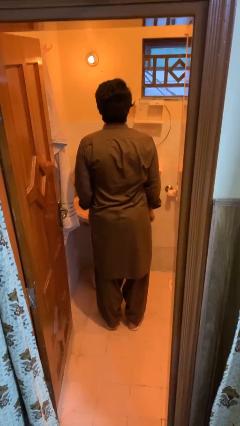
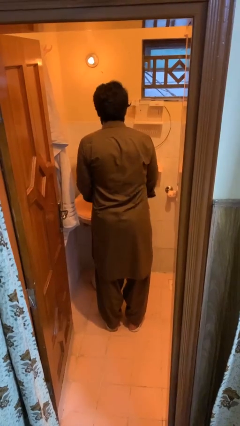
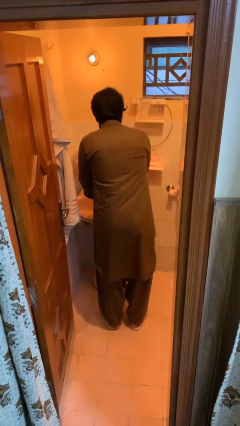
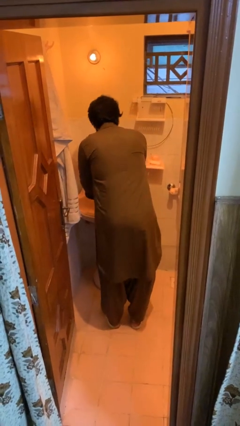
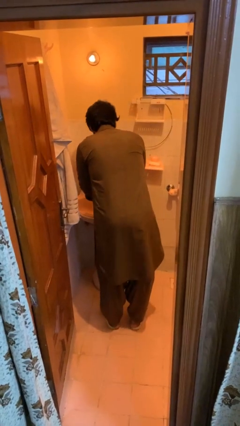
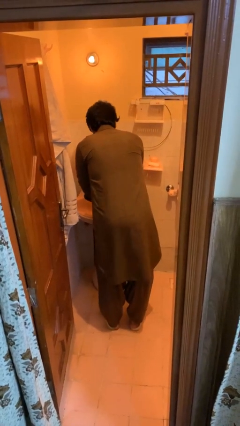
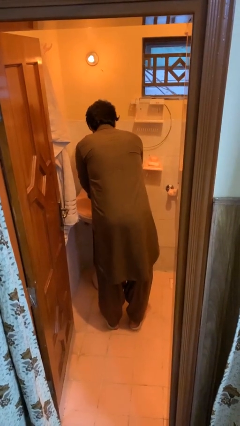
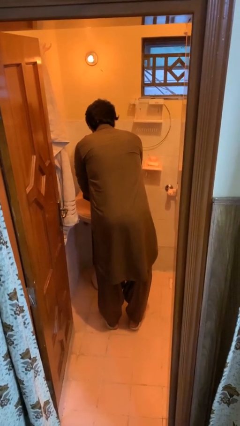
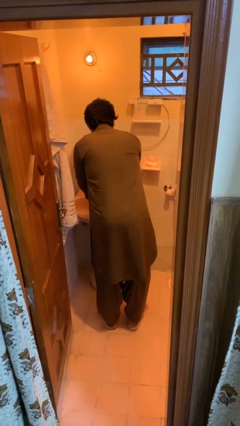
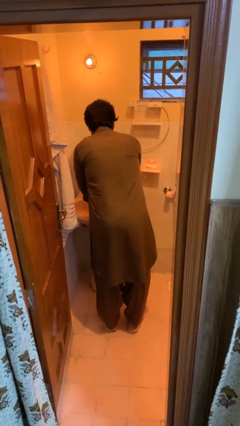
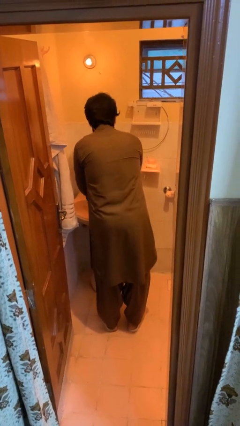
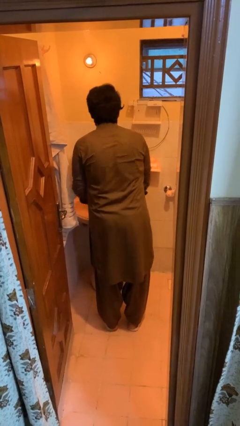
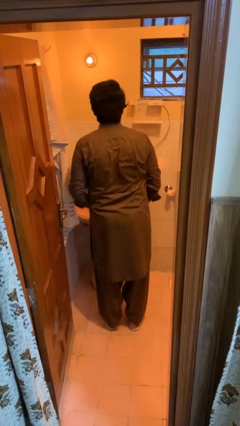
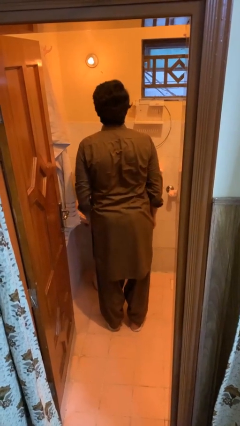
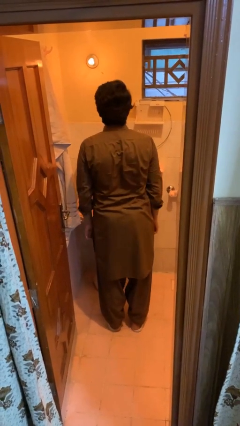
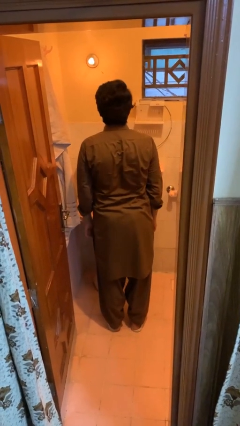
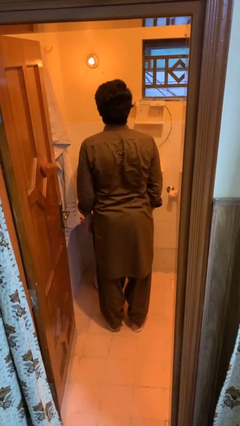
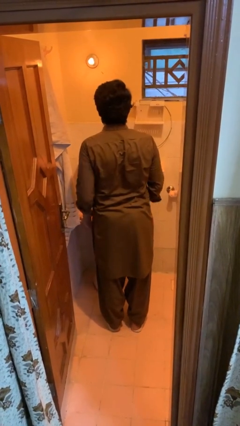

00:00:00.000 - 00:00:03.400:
person washes hands

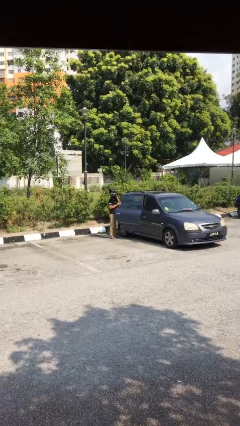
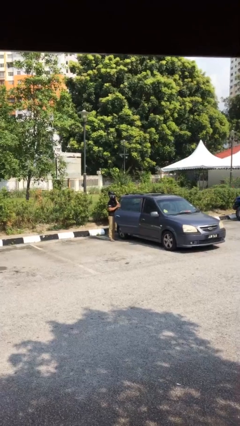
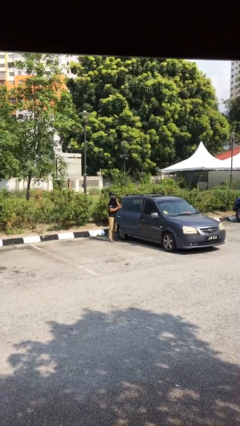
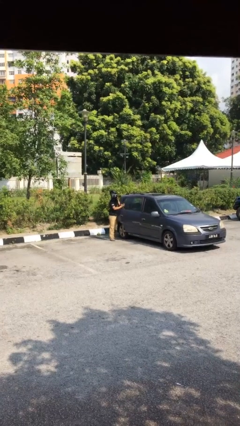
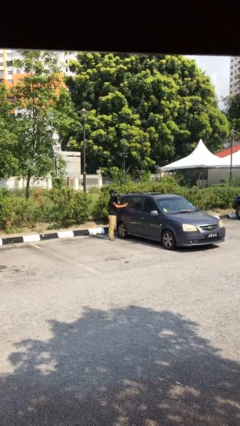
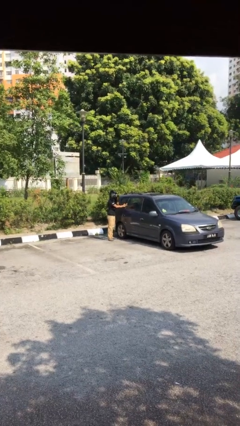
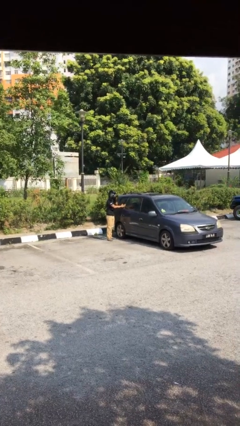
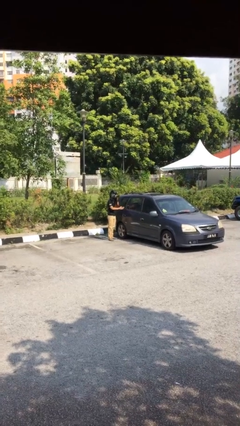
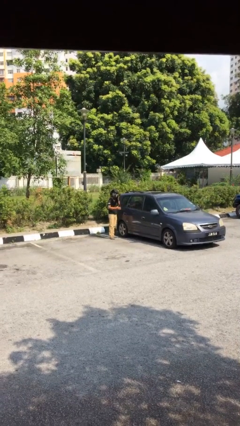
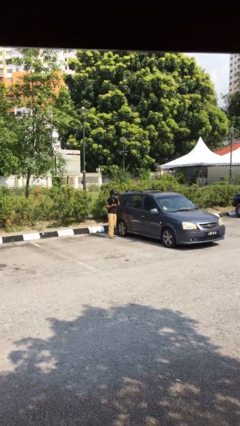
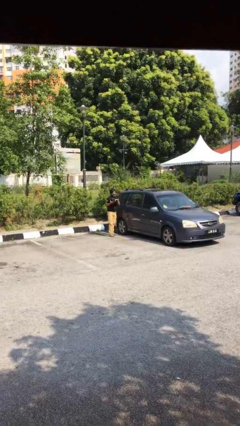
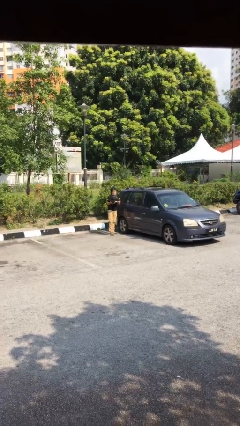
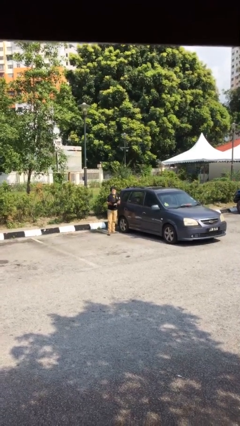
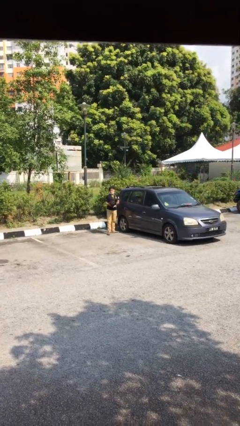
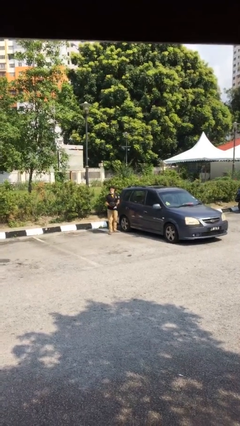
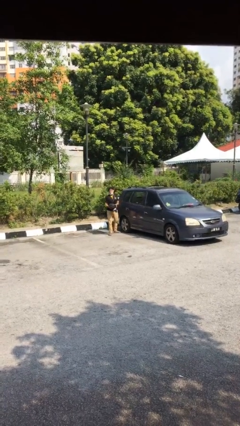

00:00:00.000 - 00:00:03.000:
person closes car door

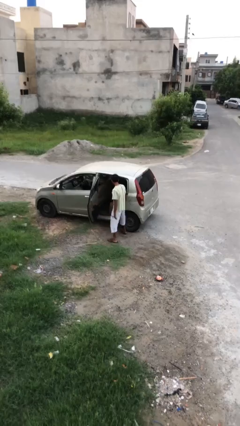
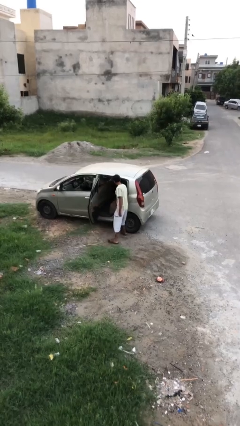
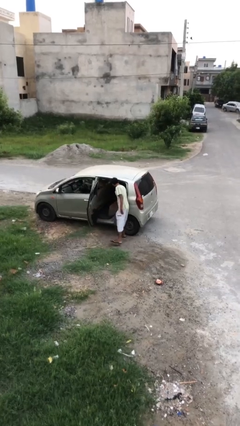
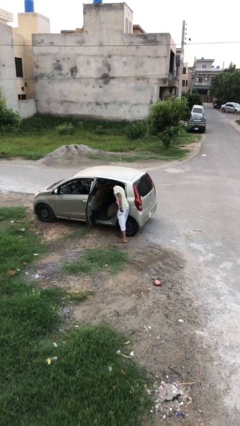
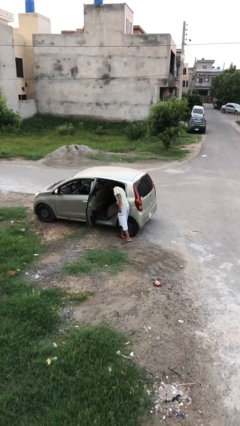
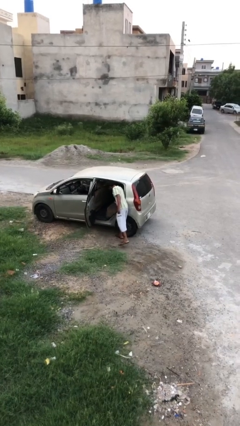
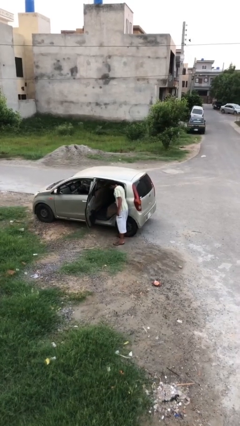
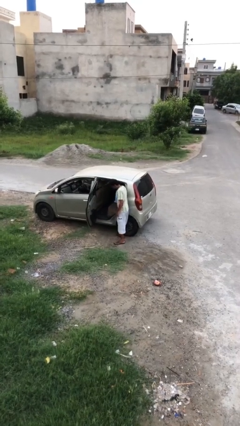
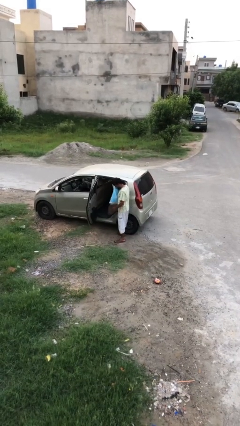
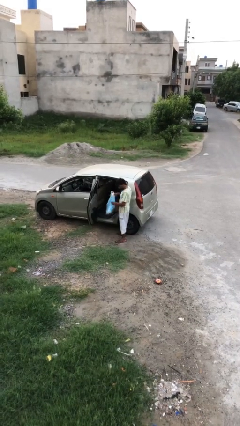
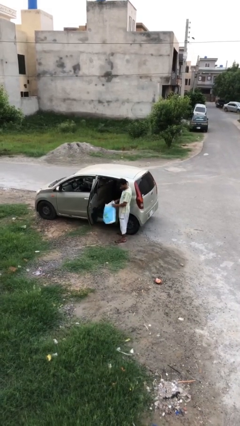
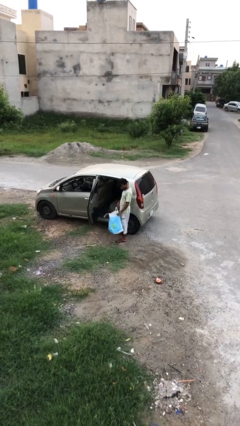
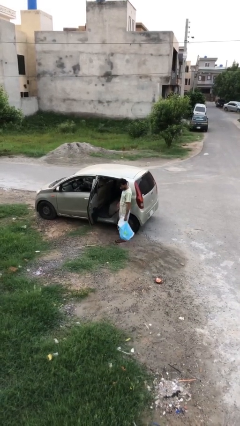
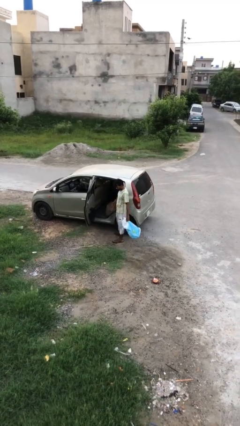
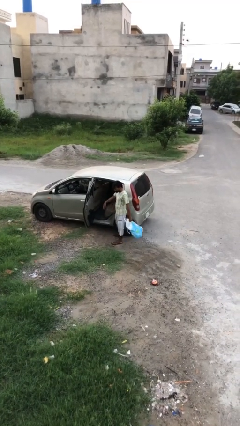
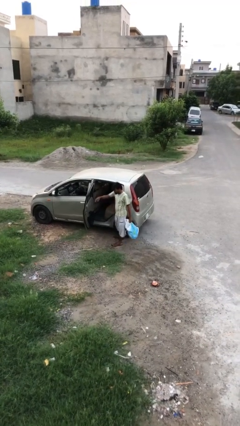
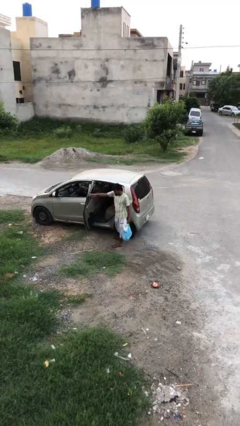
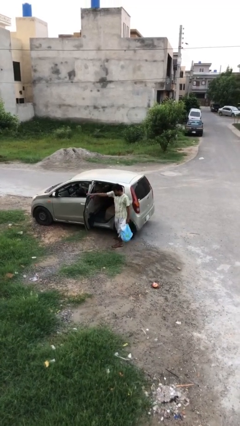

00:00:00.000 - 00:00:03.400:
person unloads car

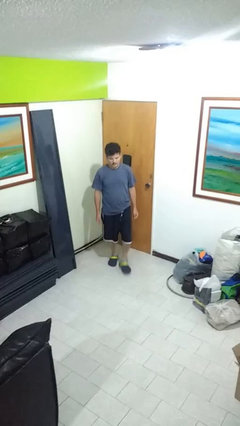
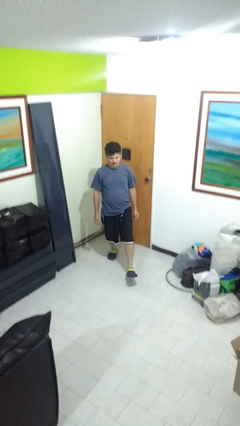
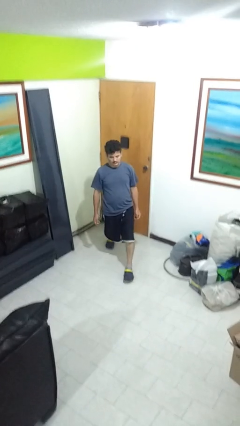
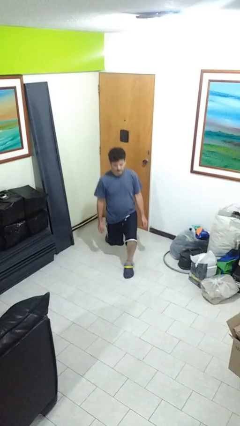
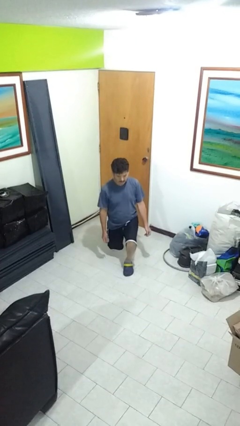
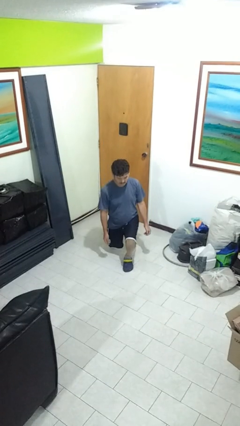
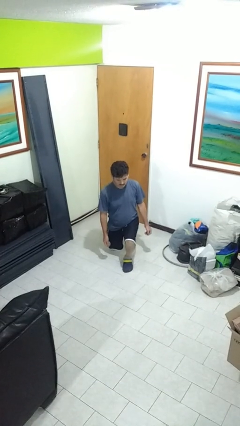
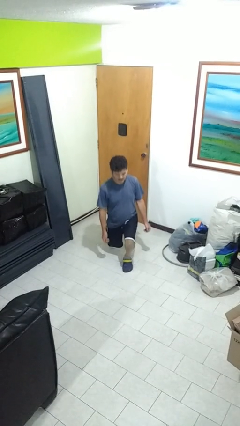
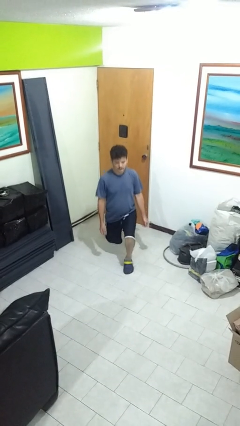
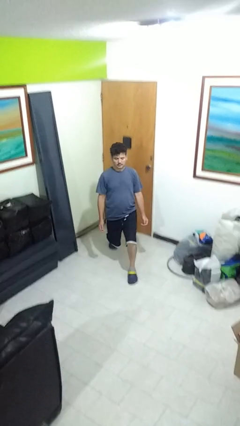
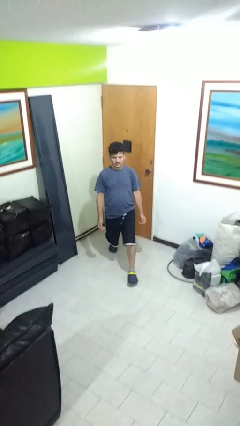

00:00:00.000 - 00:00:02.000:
person exercises with lunges

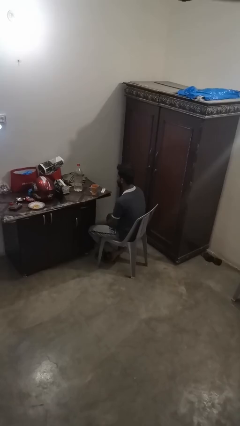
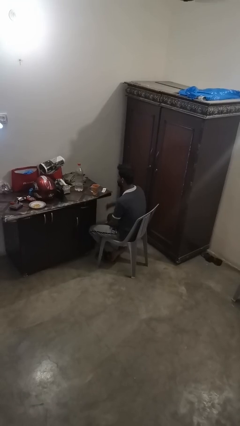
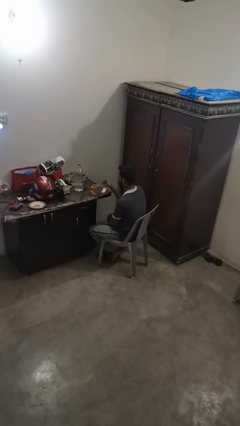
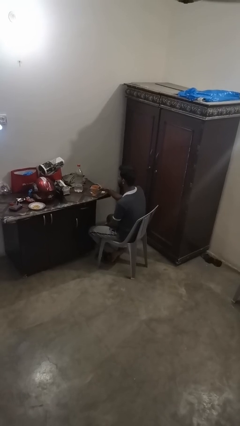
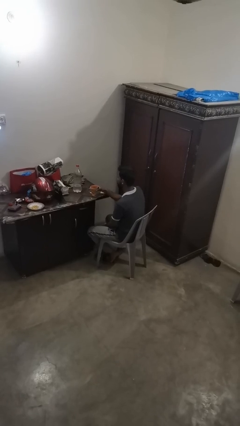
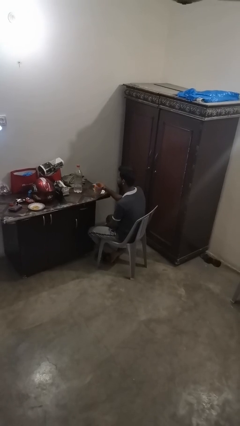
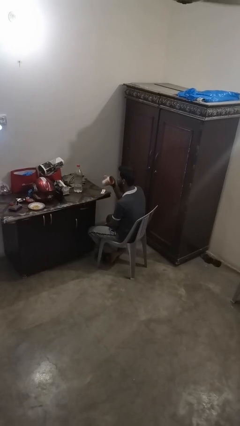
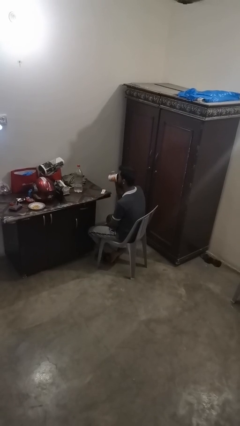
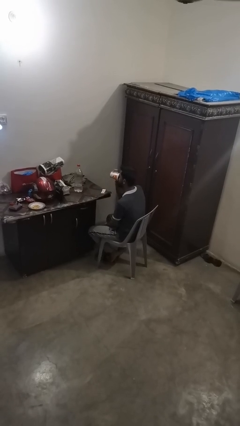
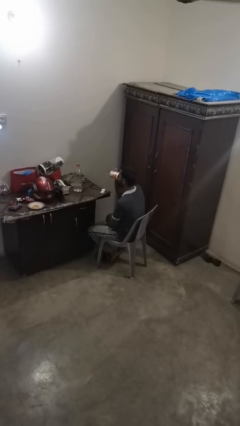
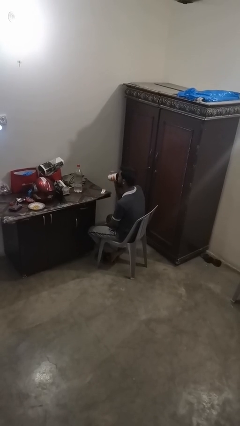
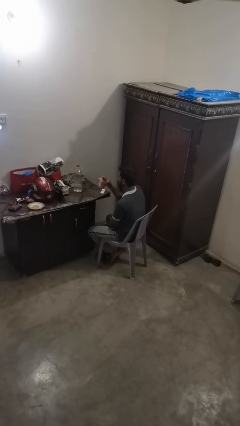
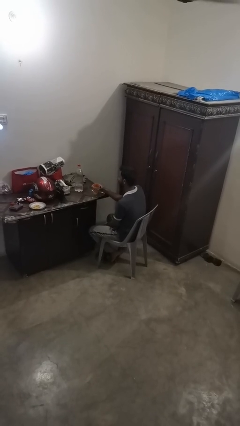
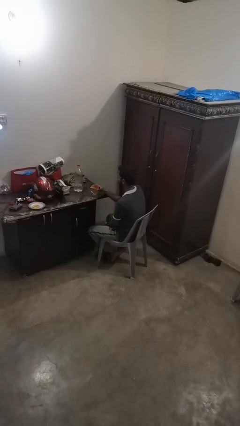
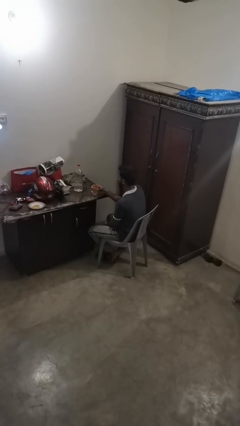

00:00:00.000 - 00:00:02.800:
person drinks from cup

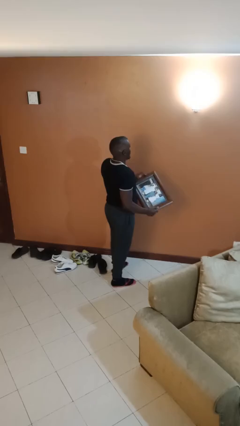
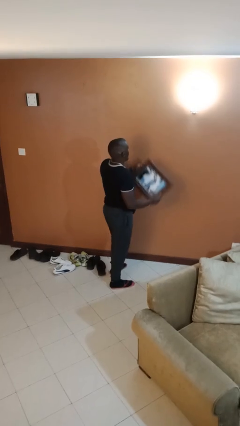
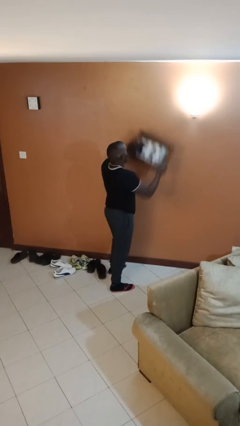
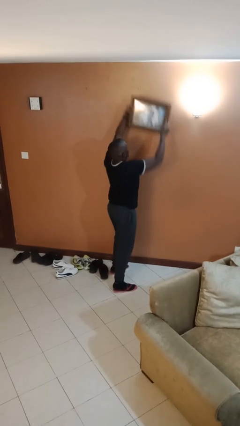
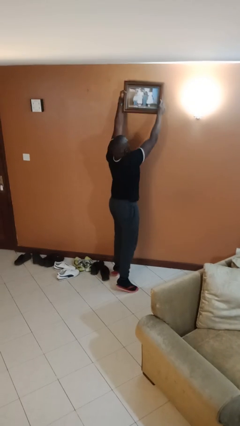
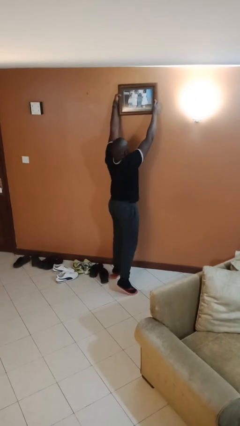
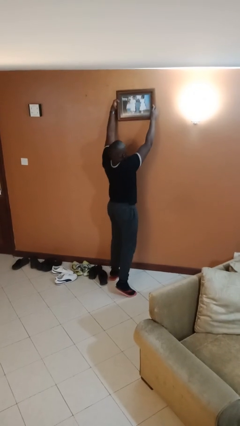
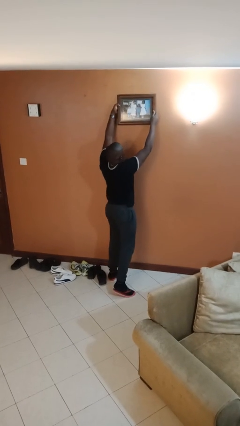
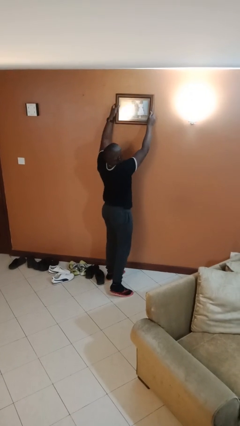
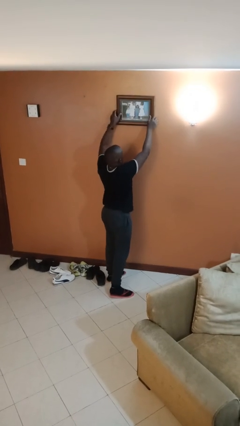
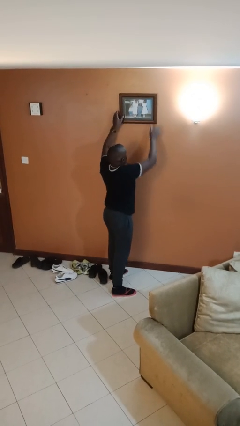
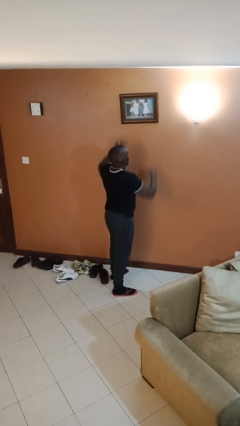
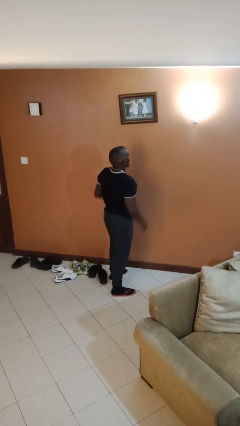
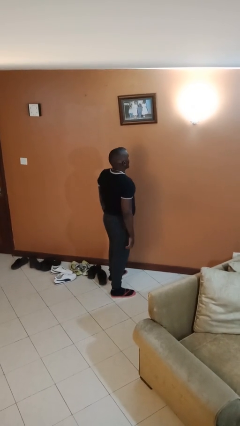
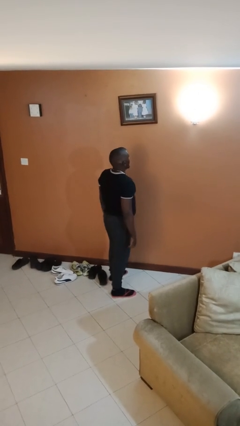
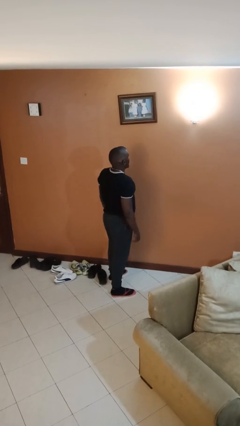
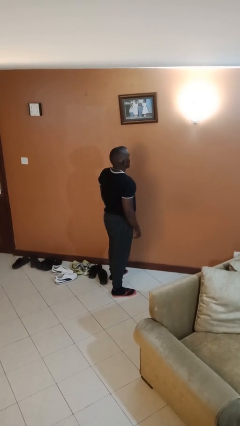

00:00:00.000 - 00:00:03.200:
person puts up picture frame
